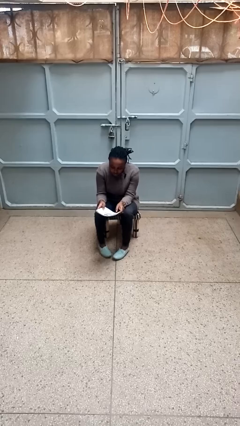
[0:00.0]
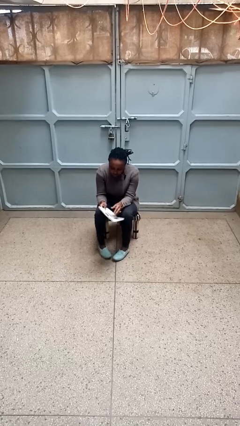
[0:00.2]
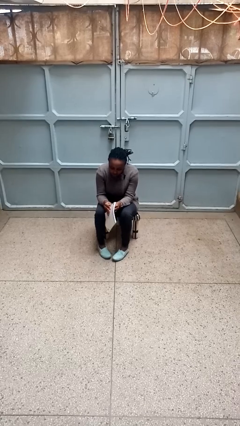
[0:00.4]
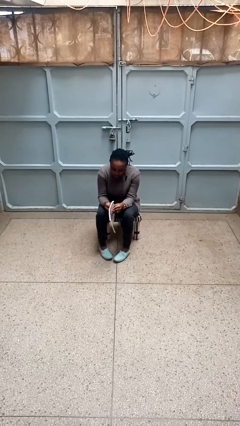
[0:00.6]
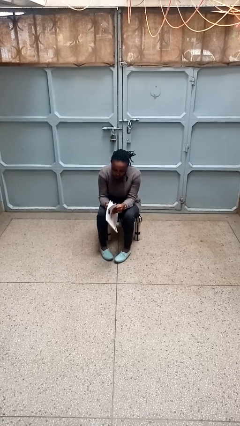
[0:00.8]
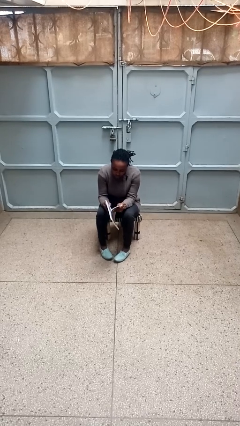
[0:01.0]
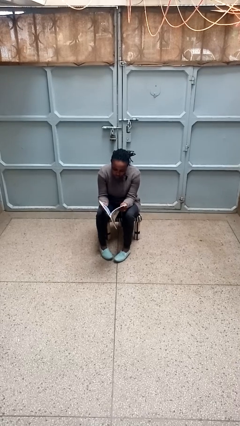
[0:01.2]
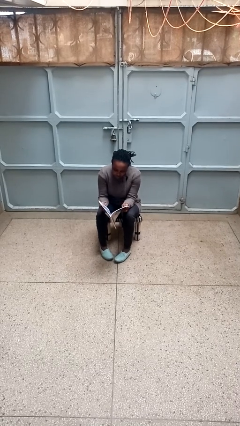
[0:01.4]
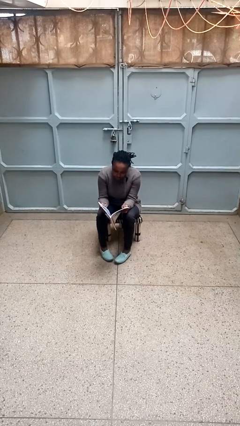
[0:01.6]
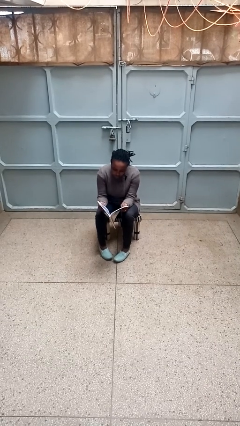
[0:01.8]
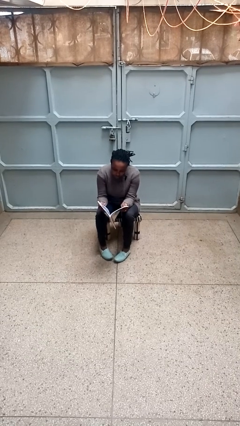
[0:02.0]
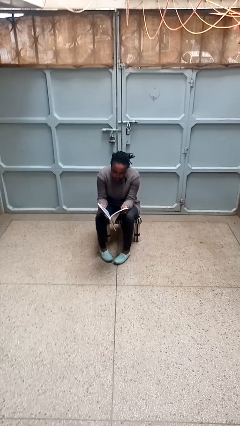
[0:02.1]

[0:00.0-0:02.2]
person reads magazine

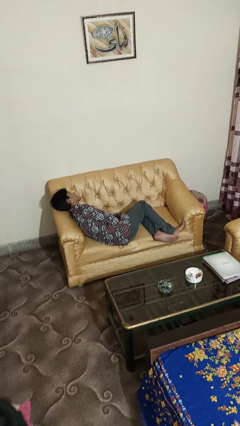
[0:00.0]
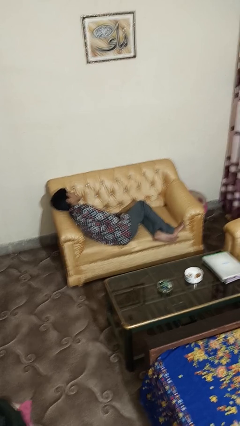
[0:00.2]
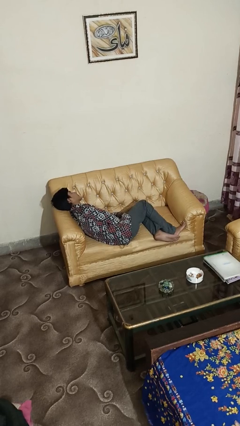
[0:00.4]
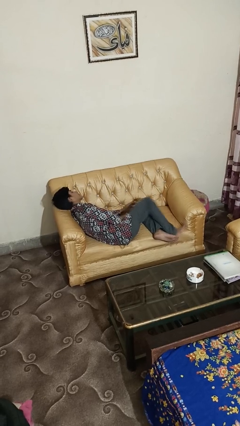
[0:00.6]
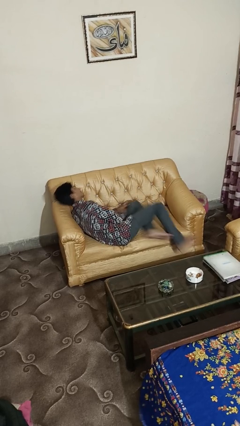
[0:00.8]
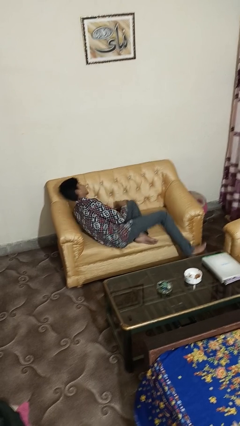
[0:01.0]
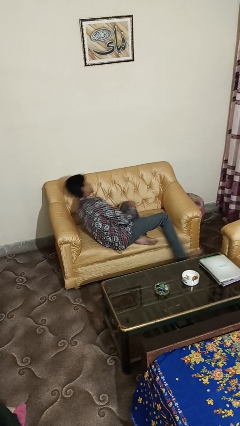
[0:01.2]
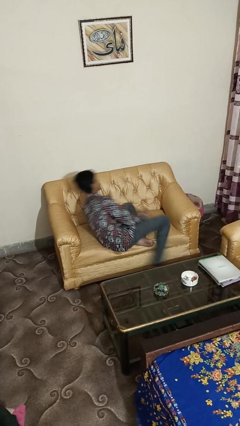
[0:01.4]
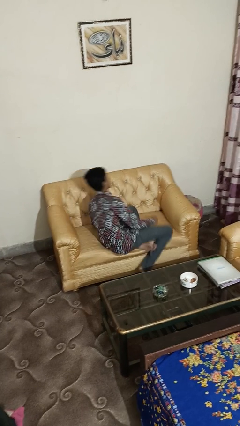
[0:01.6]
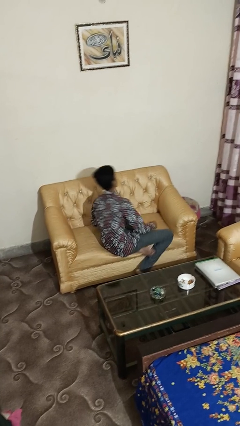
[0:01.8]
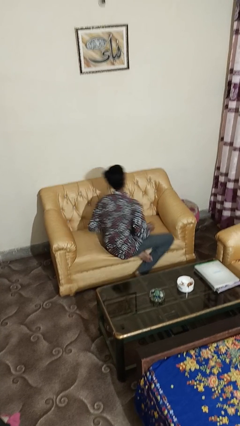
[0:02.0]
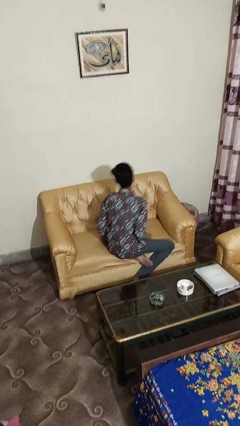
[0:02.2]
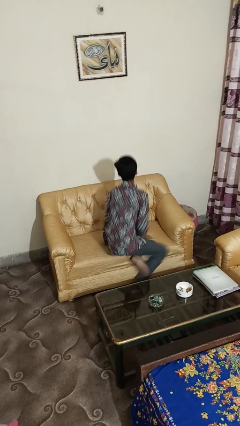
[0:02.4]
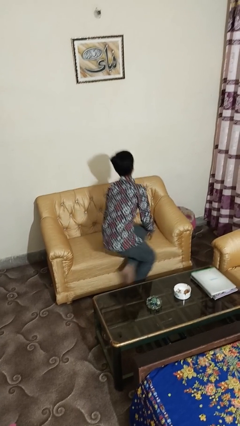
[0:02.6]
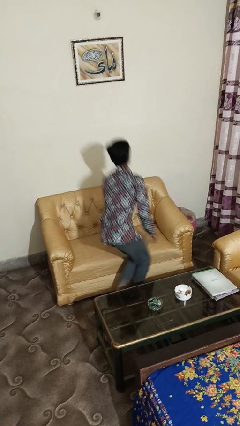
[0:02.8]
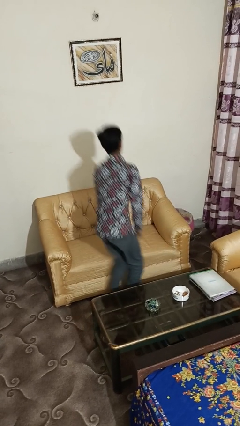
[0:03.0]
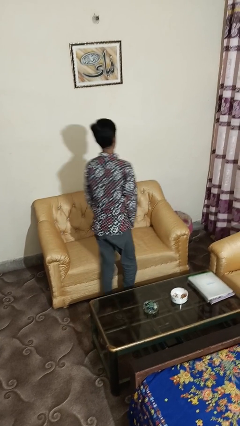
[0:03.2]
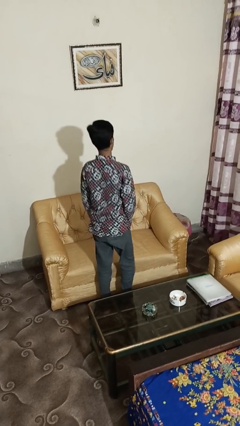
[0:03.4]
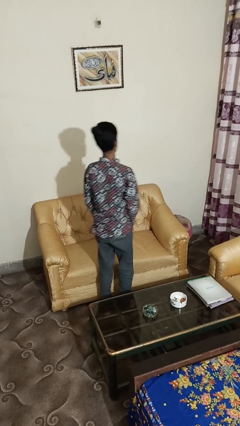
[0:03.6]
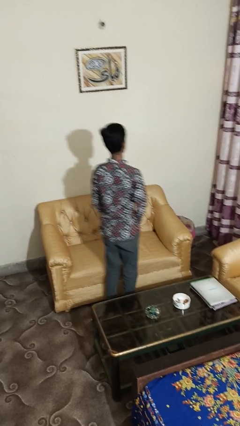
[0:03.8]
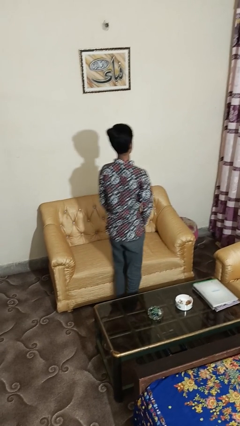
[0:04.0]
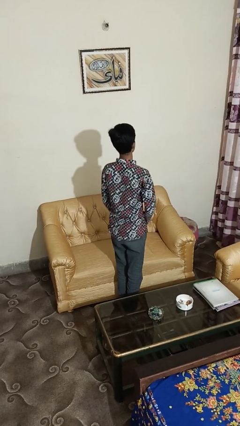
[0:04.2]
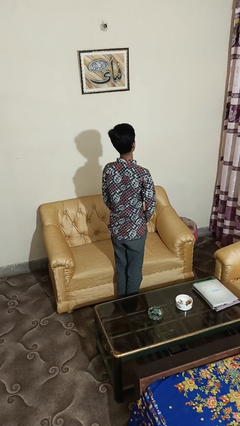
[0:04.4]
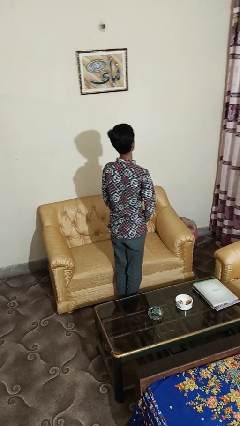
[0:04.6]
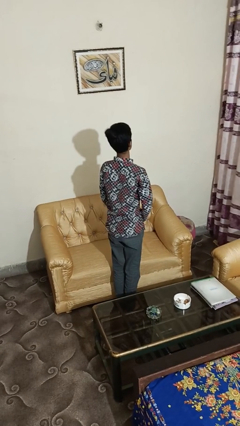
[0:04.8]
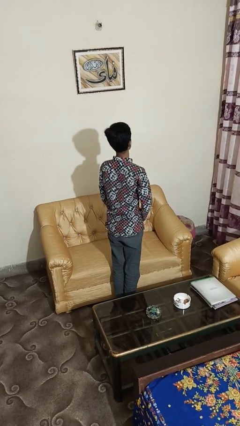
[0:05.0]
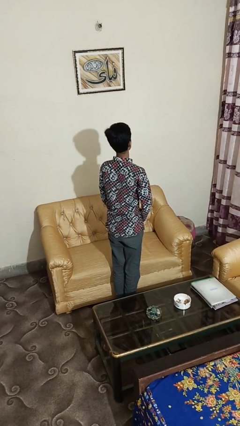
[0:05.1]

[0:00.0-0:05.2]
person stands up

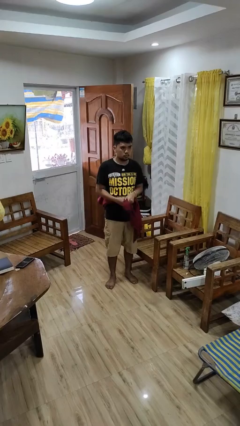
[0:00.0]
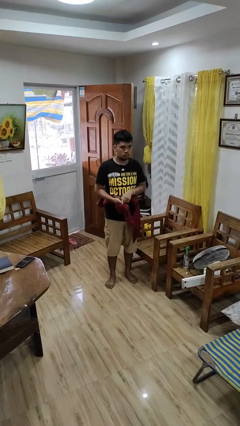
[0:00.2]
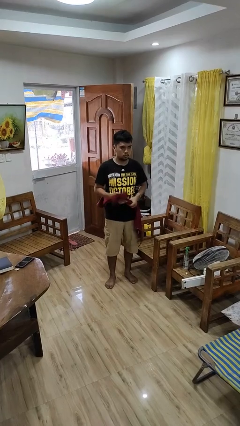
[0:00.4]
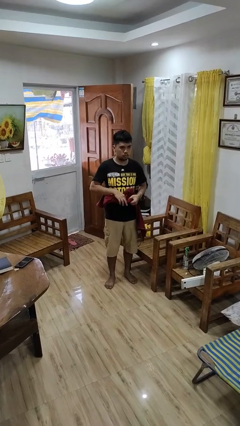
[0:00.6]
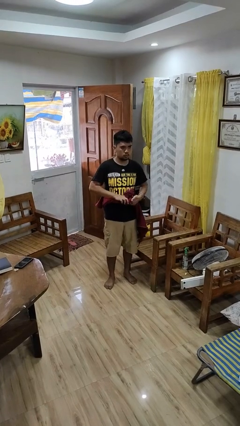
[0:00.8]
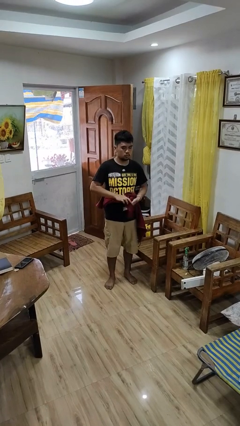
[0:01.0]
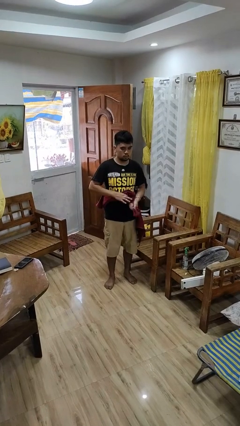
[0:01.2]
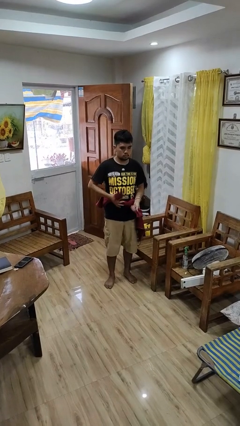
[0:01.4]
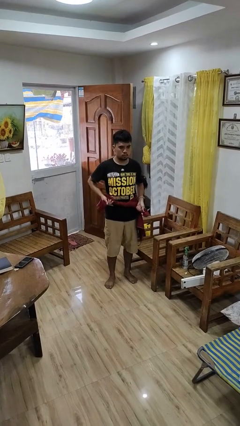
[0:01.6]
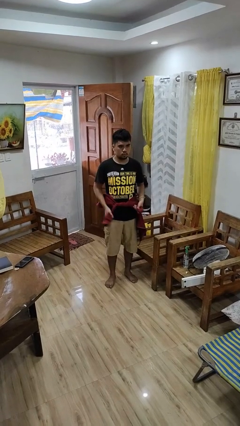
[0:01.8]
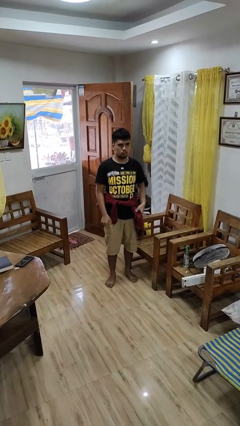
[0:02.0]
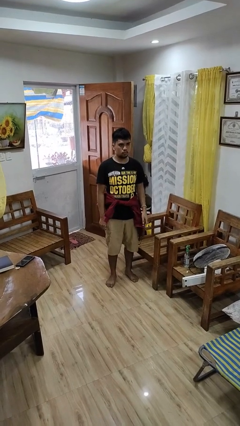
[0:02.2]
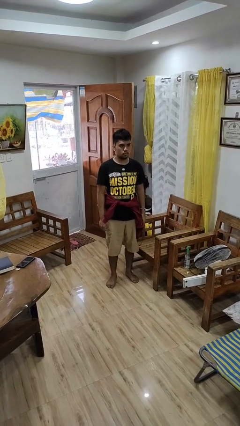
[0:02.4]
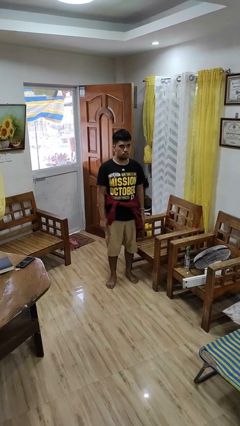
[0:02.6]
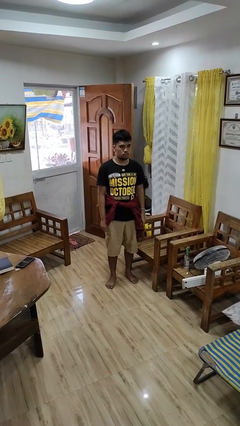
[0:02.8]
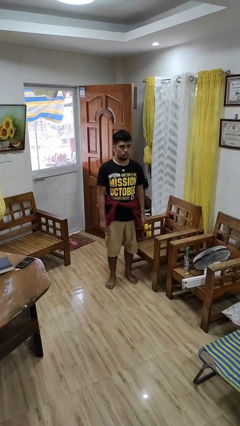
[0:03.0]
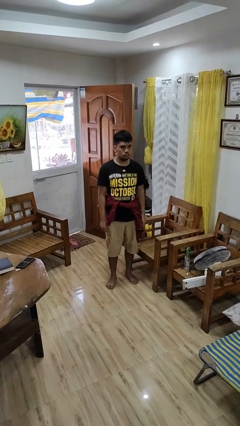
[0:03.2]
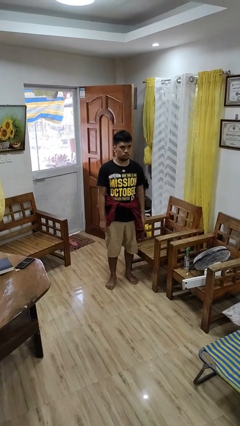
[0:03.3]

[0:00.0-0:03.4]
person ties jacket around waist

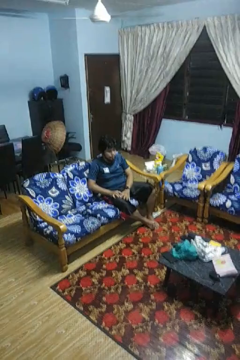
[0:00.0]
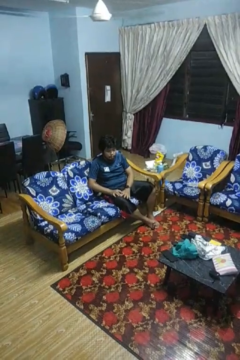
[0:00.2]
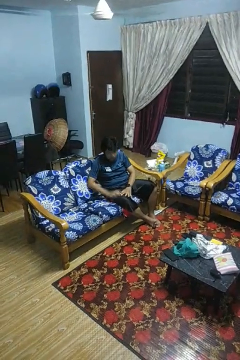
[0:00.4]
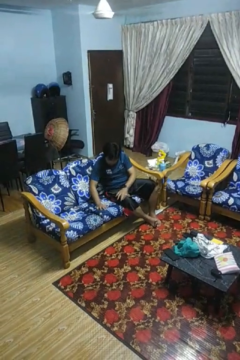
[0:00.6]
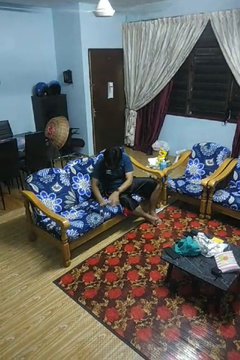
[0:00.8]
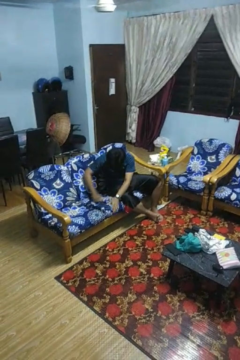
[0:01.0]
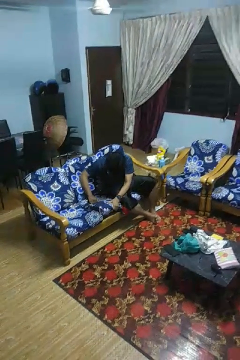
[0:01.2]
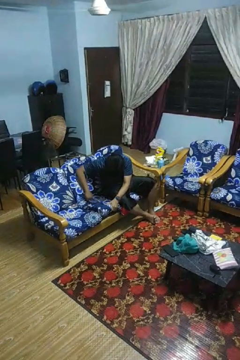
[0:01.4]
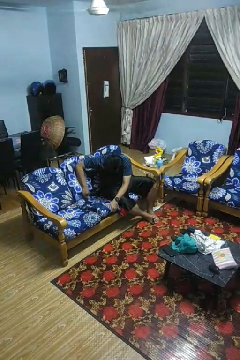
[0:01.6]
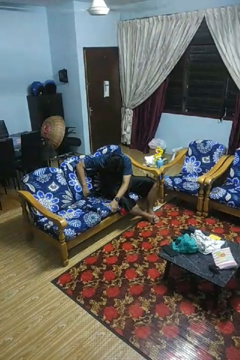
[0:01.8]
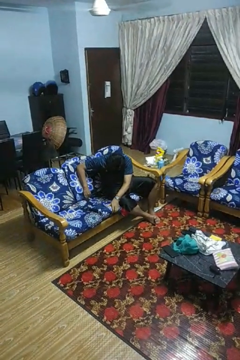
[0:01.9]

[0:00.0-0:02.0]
person searches in couch

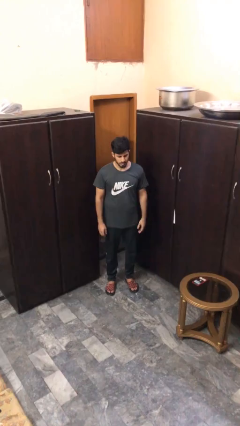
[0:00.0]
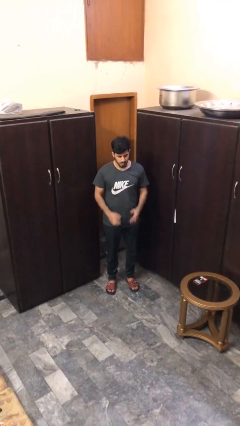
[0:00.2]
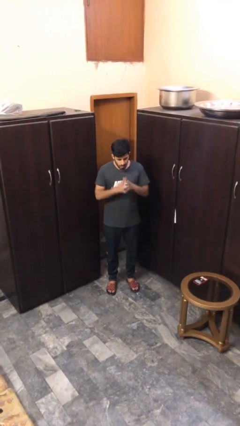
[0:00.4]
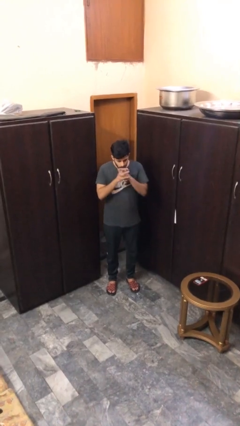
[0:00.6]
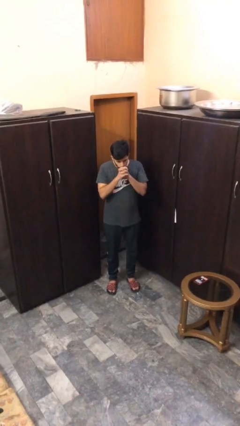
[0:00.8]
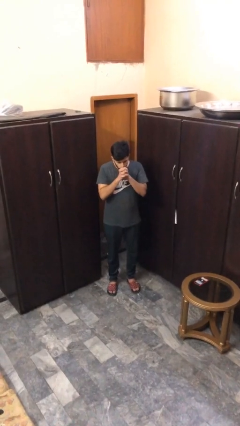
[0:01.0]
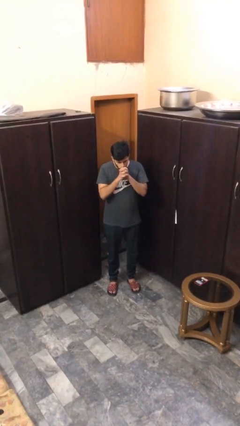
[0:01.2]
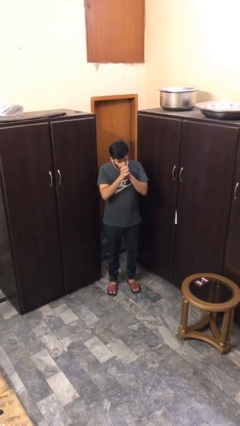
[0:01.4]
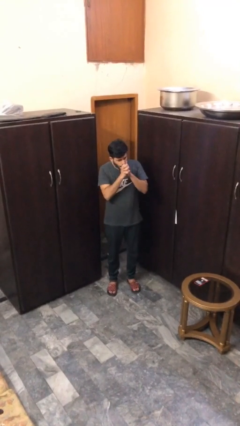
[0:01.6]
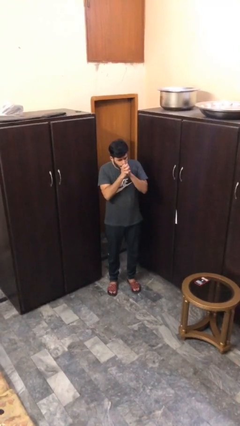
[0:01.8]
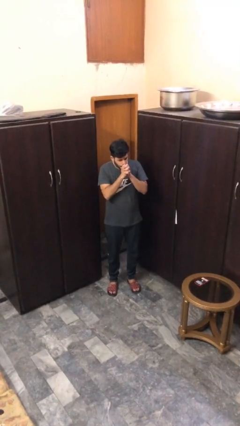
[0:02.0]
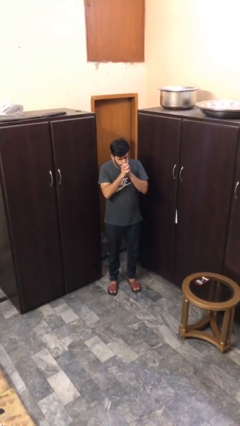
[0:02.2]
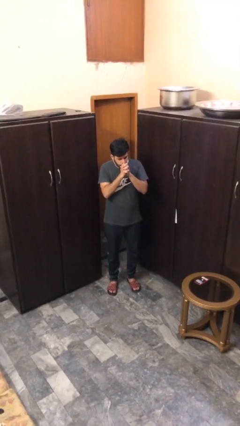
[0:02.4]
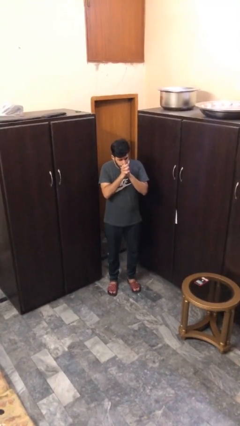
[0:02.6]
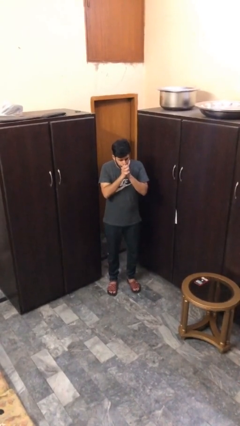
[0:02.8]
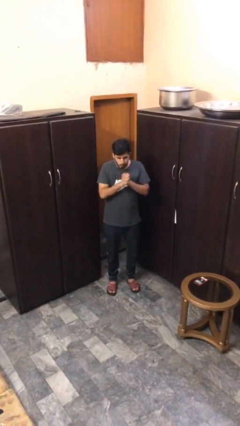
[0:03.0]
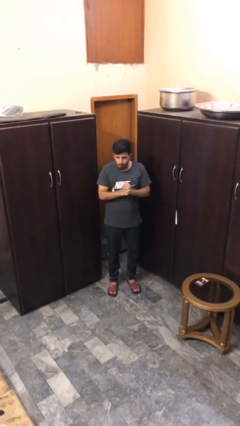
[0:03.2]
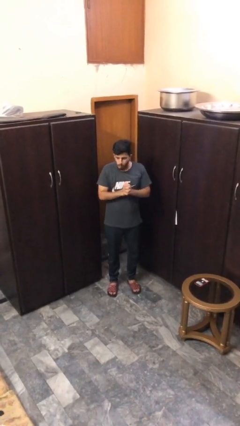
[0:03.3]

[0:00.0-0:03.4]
person blows into hands

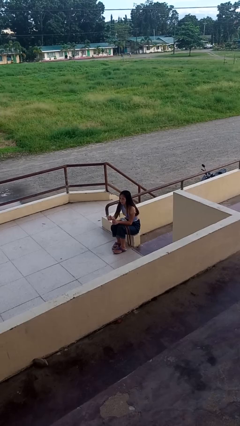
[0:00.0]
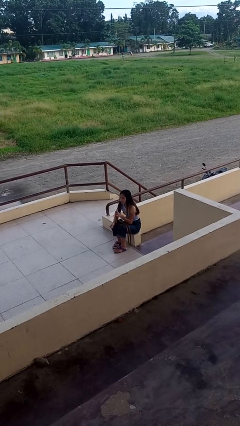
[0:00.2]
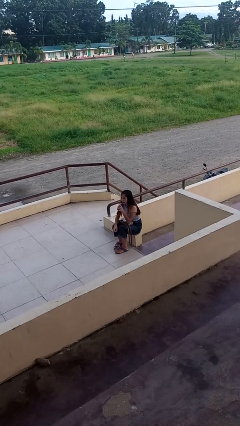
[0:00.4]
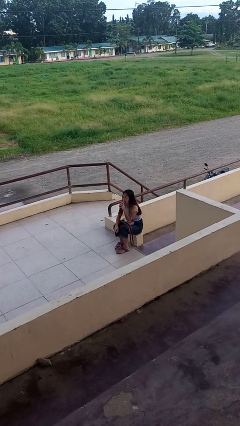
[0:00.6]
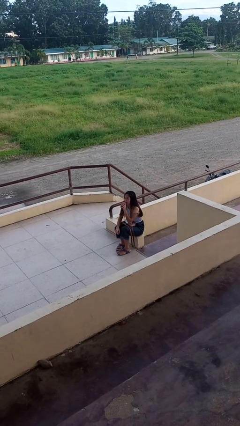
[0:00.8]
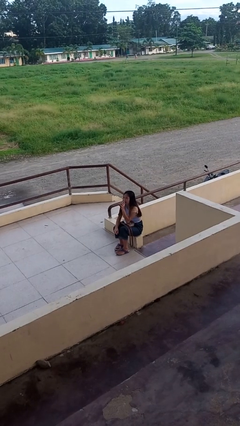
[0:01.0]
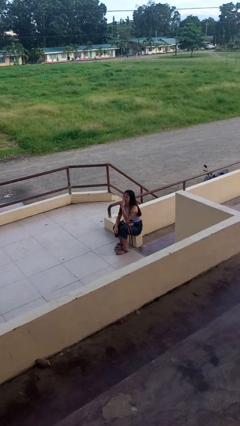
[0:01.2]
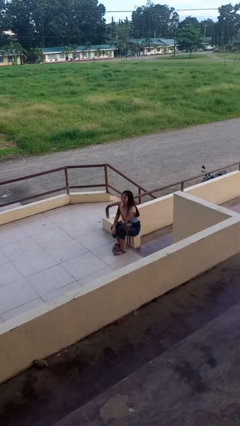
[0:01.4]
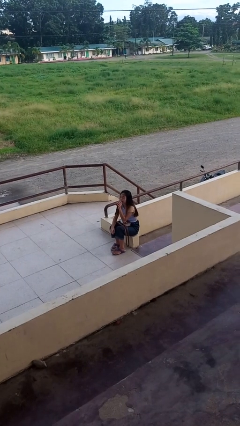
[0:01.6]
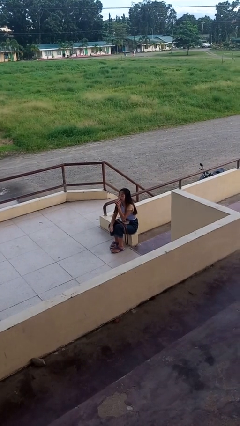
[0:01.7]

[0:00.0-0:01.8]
person drinks from beverage can

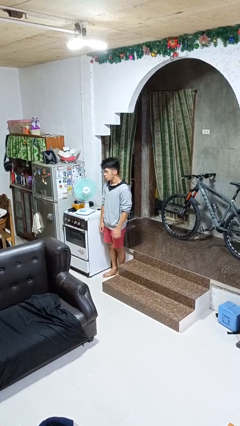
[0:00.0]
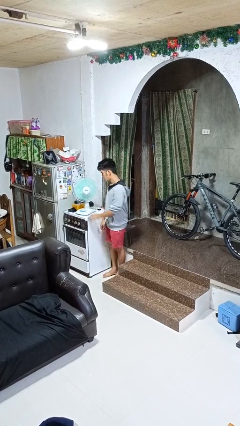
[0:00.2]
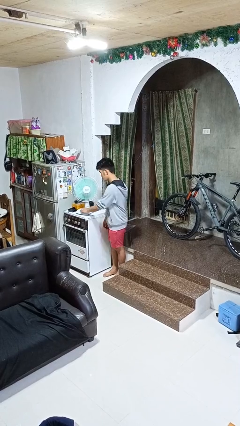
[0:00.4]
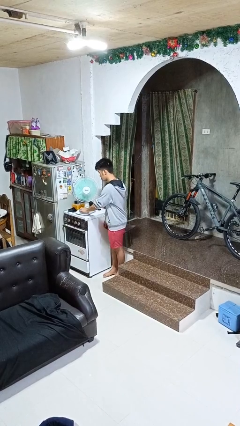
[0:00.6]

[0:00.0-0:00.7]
person turns off fan
